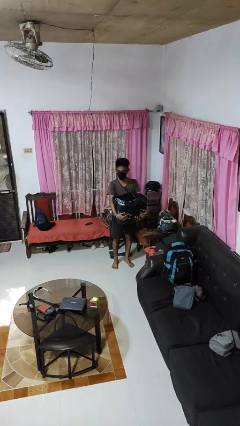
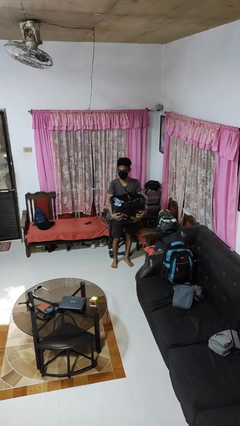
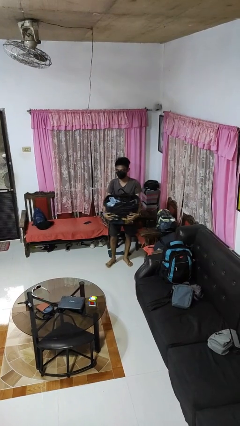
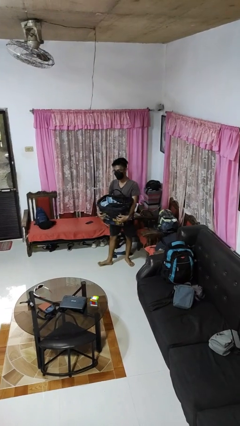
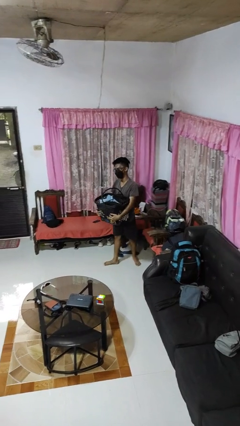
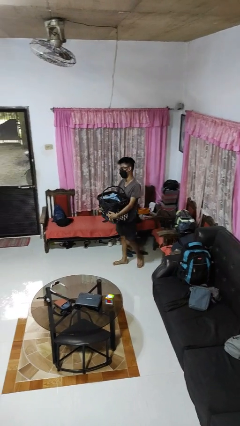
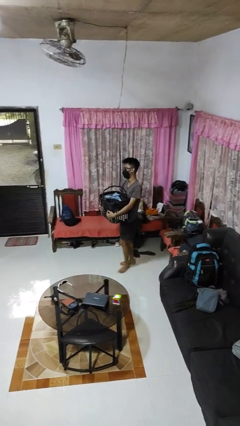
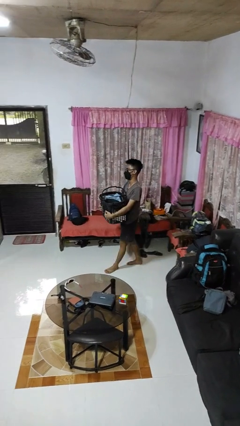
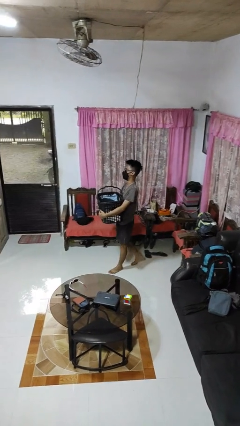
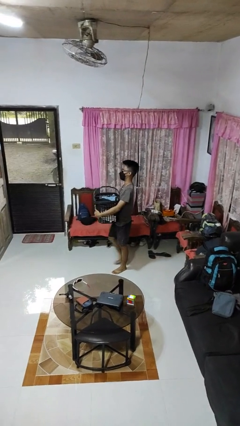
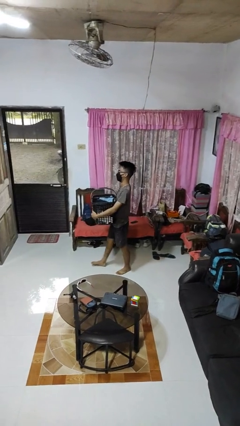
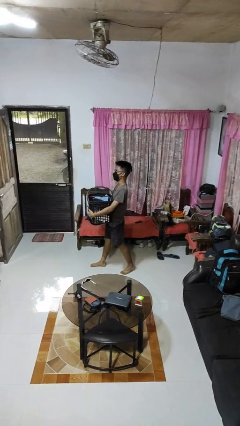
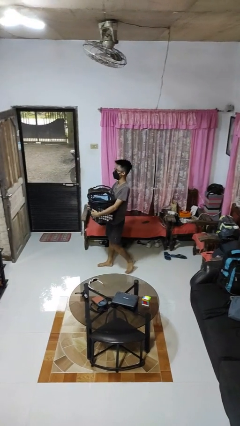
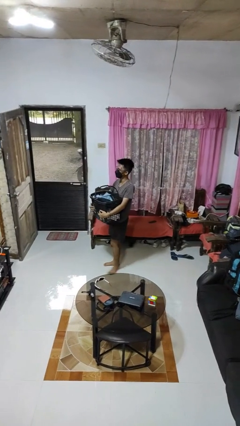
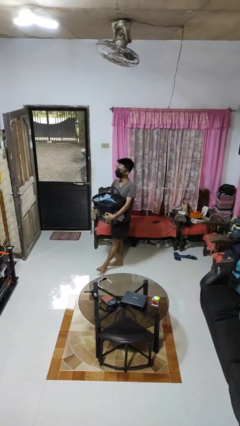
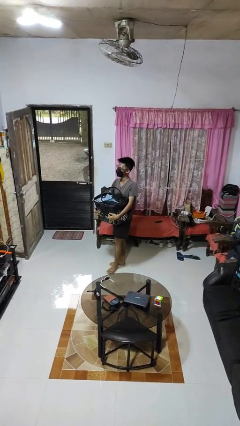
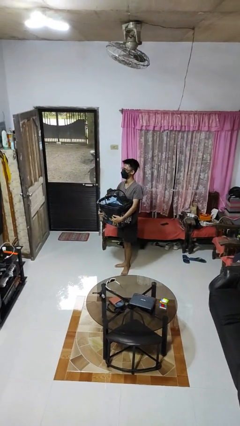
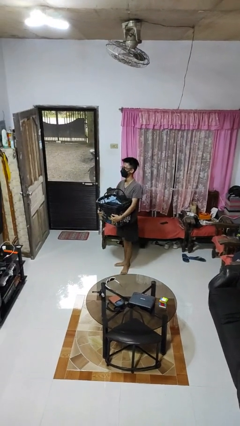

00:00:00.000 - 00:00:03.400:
person carries laundry basket

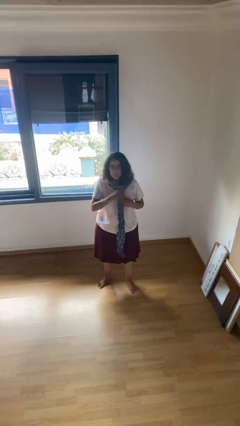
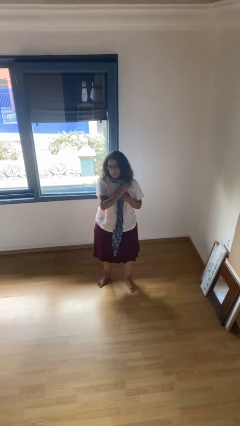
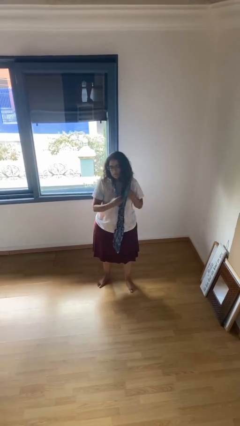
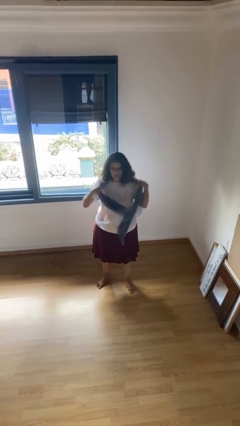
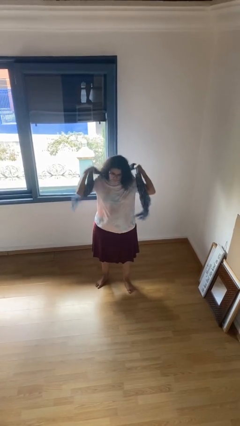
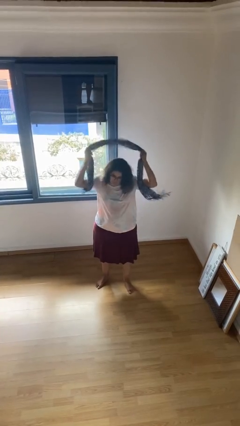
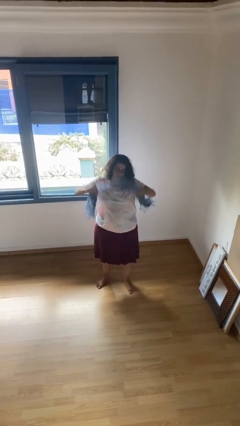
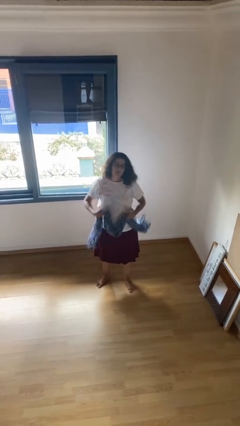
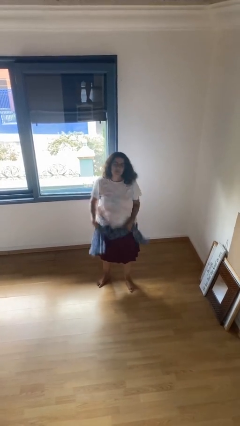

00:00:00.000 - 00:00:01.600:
person takes off scarf

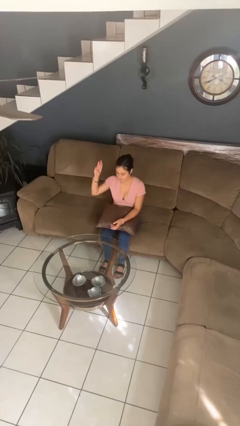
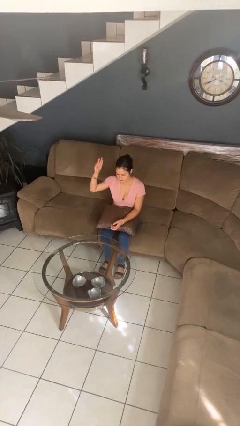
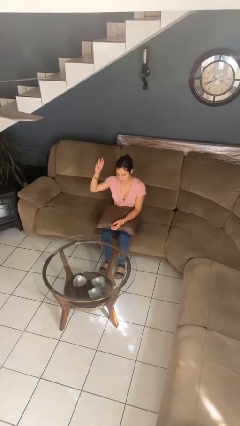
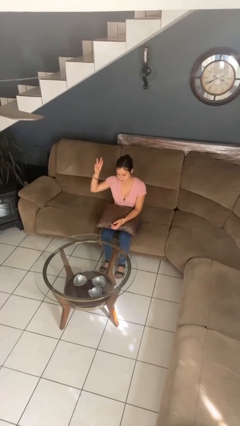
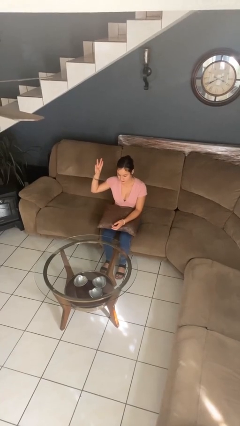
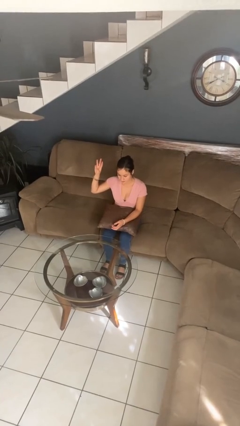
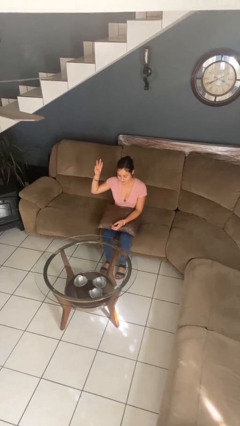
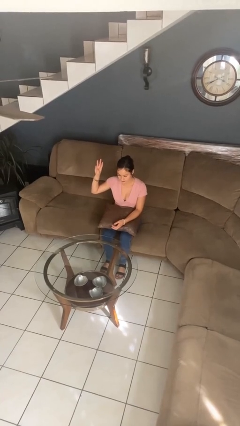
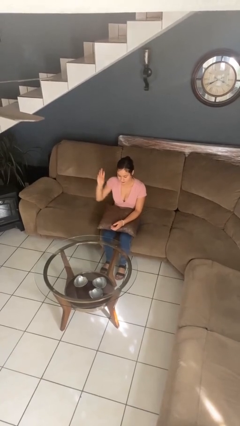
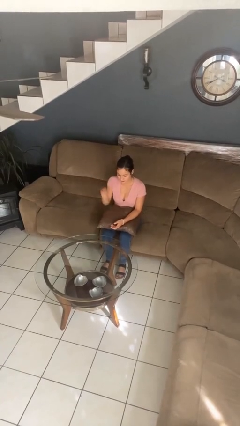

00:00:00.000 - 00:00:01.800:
person gestures number three

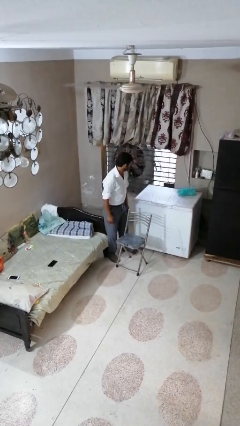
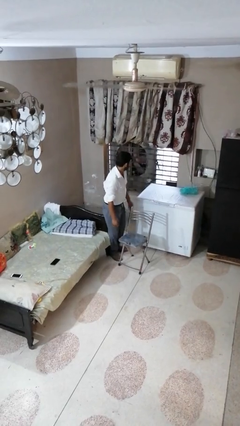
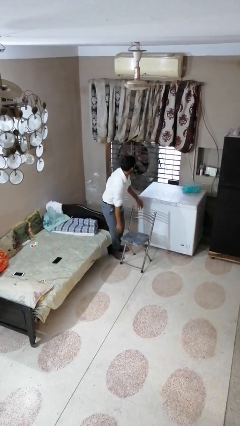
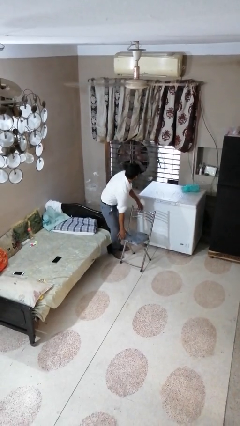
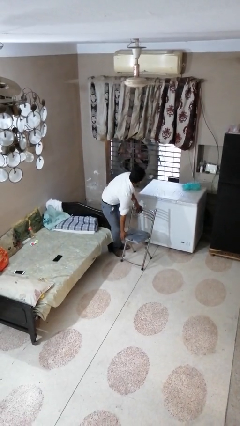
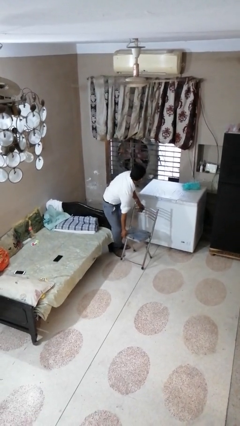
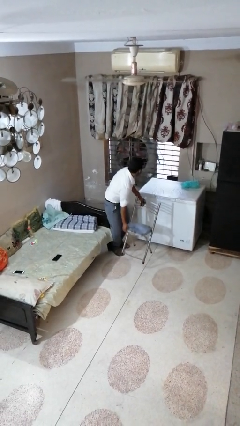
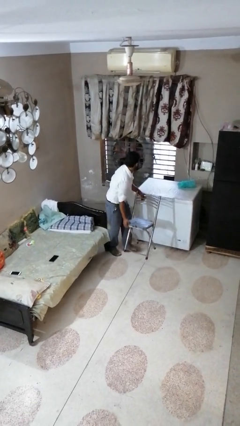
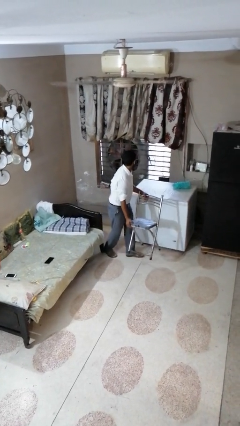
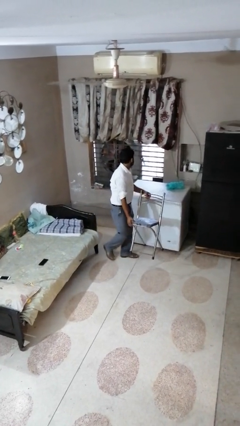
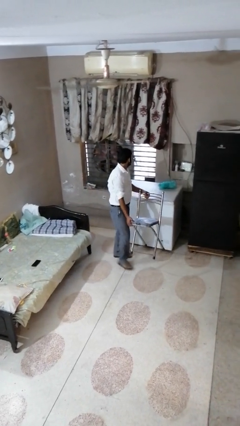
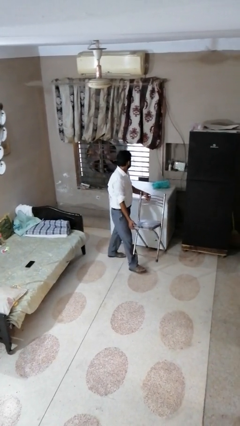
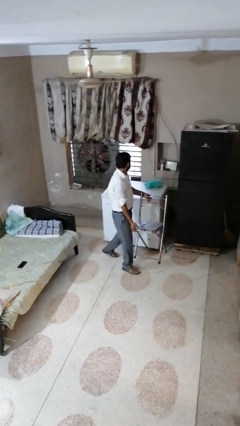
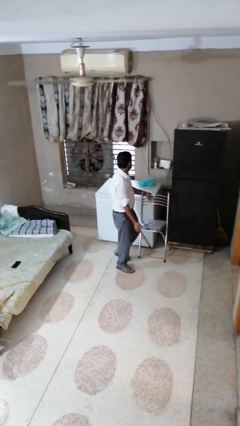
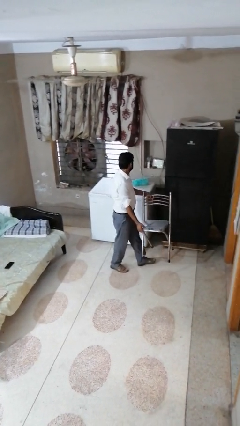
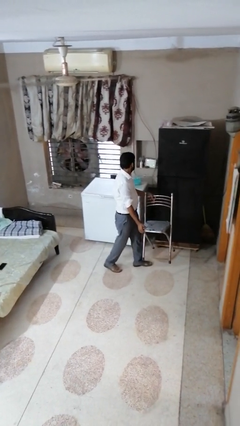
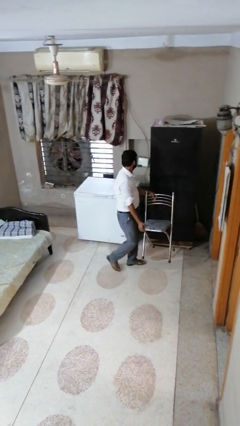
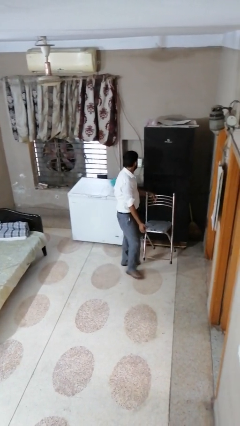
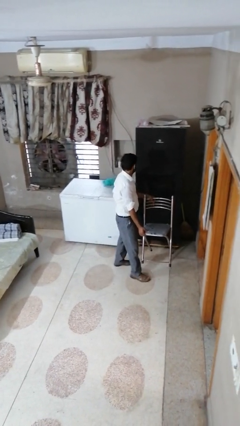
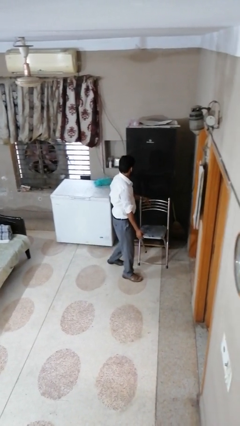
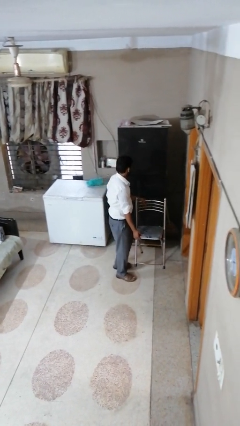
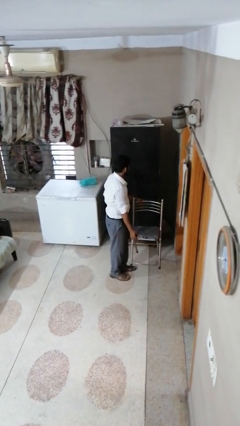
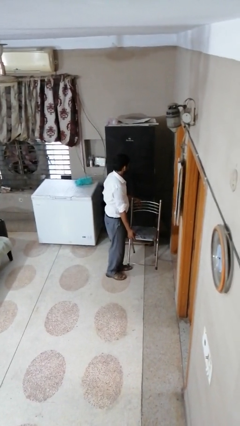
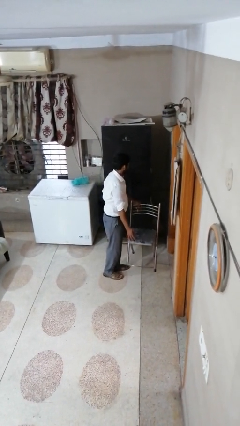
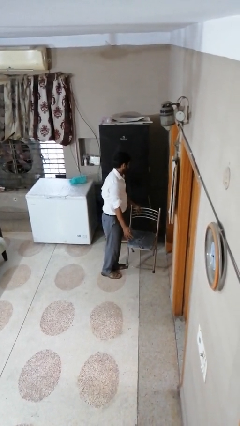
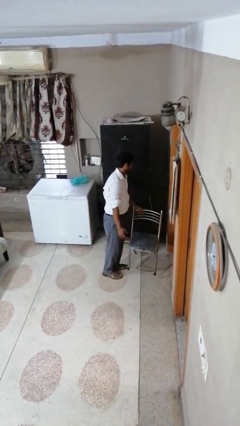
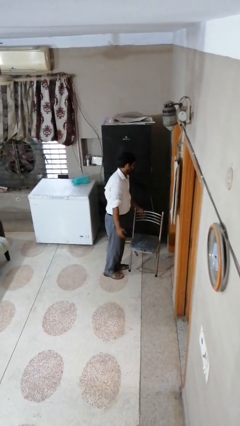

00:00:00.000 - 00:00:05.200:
person carries furniture

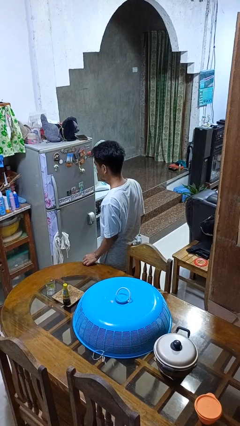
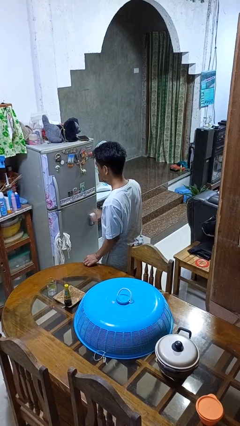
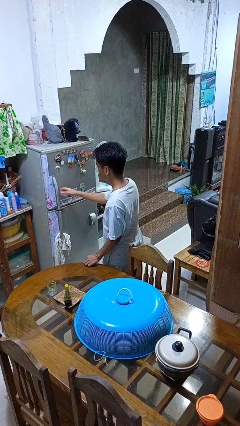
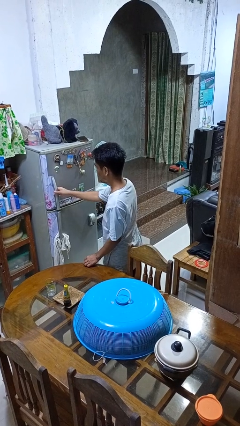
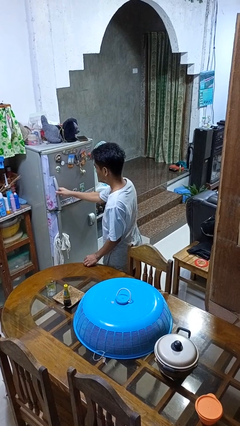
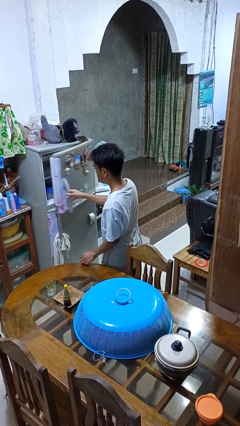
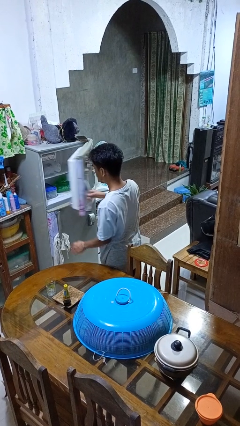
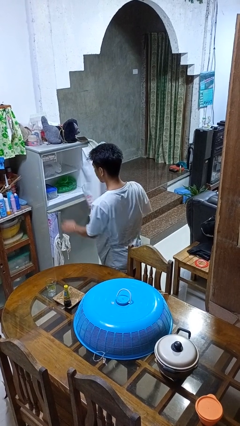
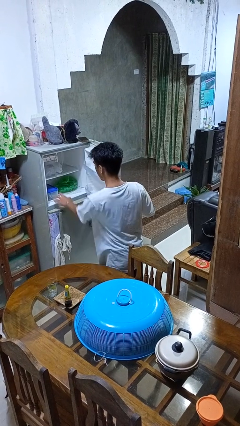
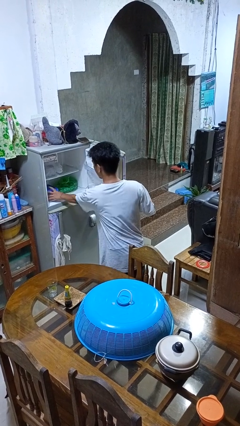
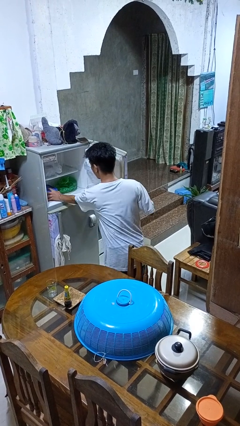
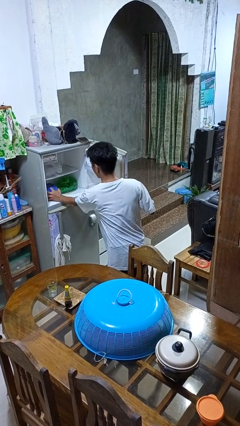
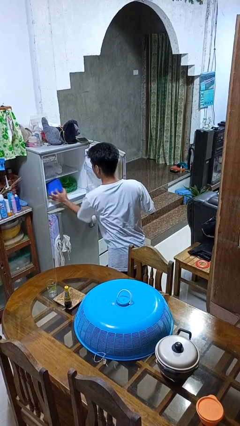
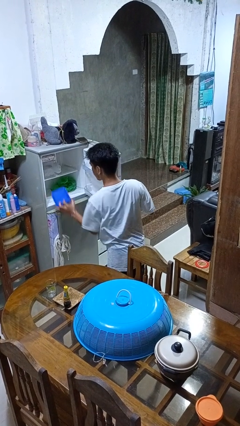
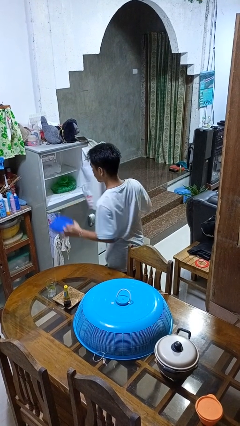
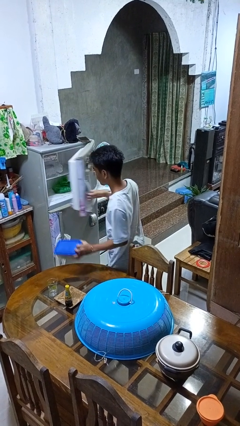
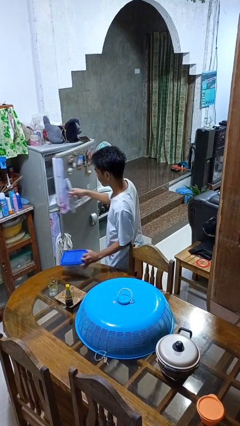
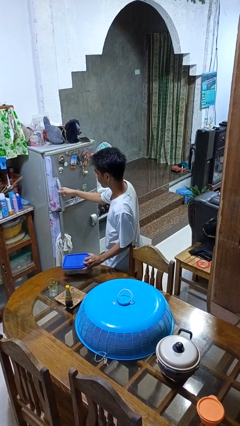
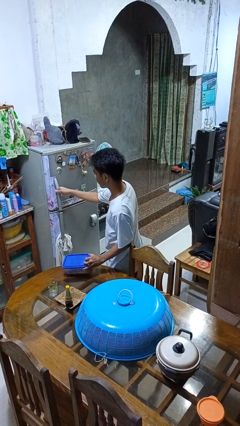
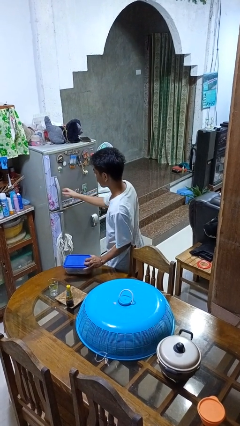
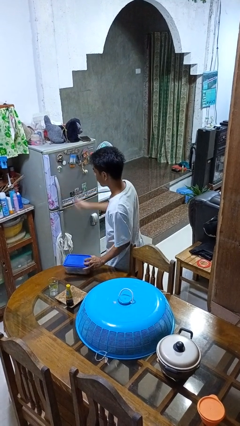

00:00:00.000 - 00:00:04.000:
person takes object from refrigerator

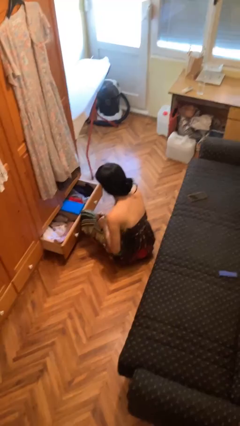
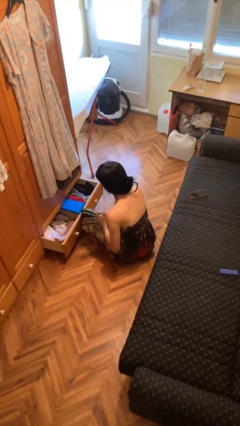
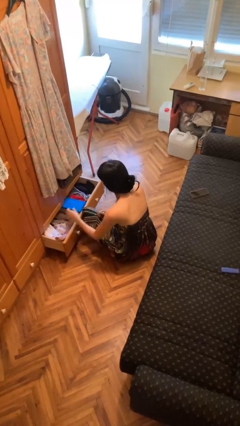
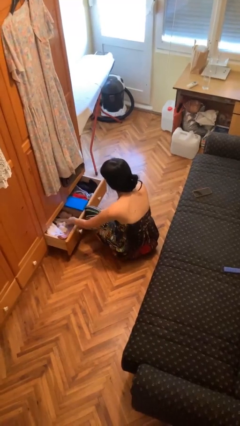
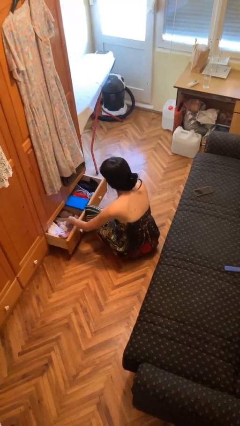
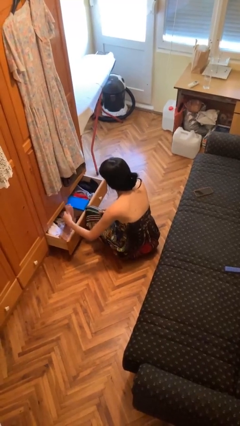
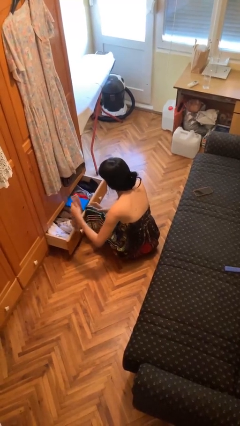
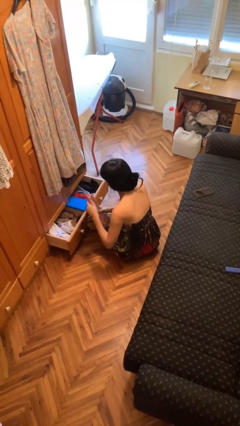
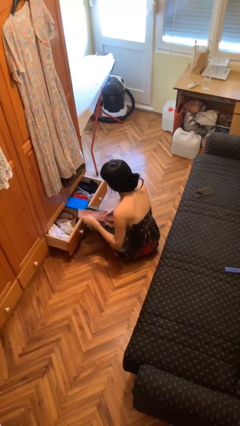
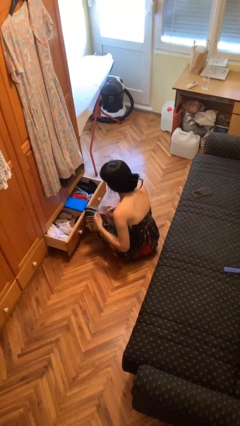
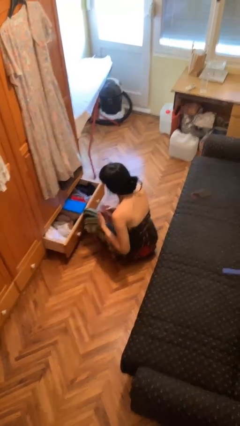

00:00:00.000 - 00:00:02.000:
person takes clothes from dresser
